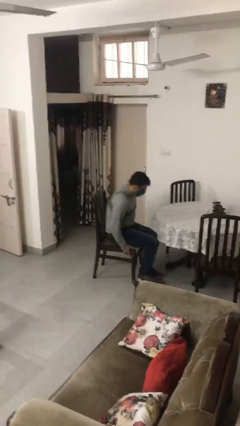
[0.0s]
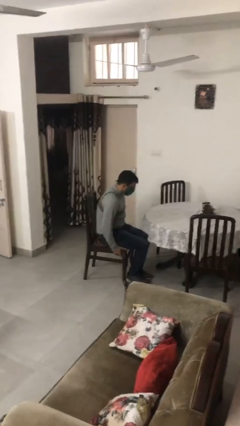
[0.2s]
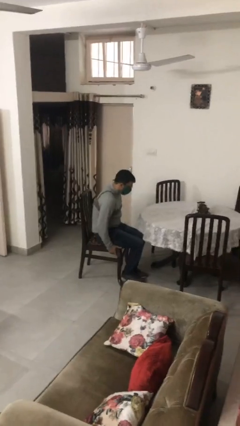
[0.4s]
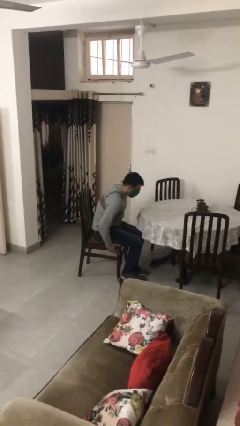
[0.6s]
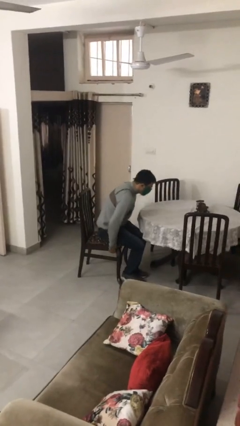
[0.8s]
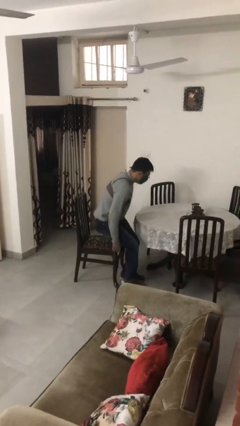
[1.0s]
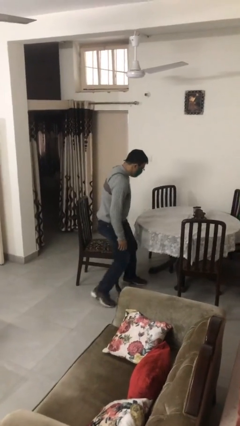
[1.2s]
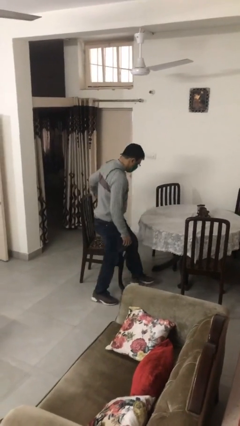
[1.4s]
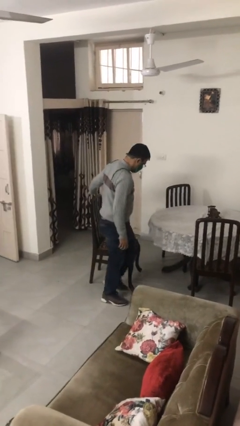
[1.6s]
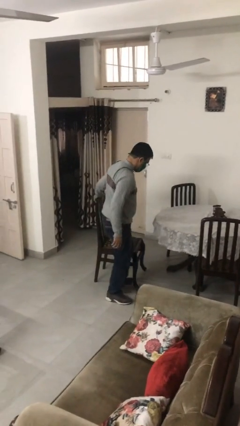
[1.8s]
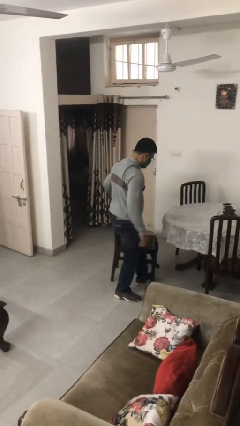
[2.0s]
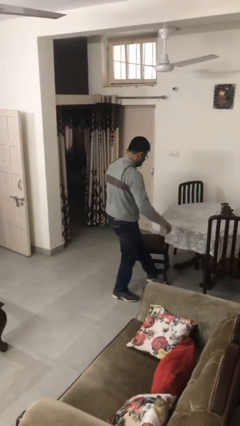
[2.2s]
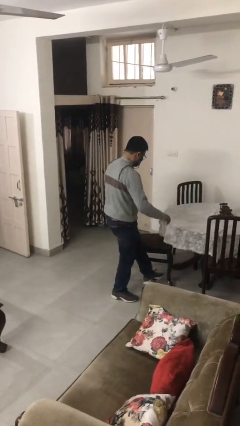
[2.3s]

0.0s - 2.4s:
person stands up

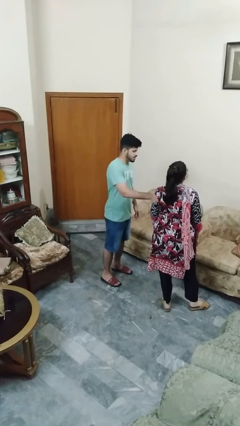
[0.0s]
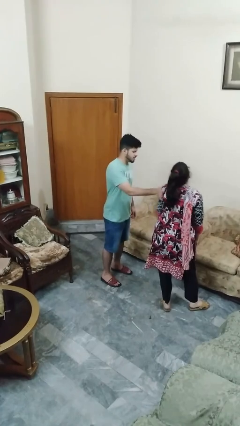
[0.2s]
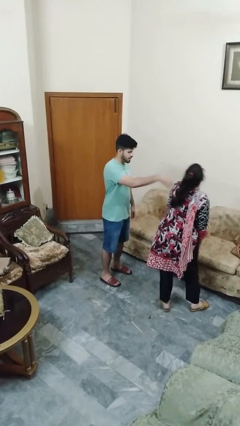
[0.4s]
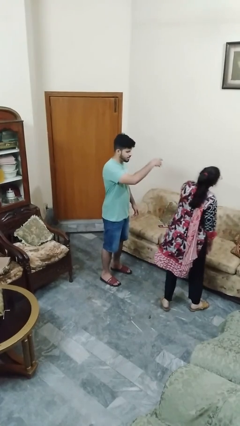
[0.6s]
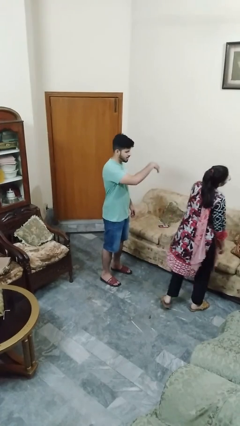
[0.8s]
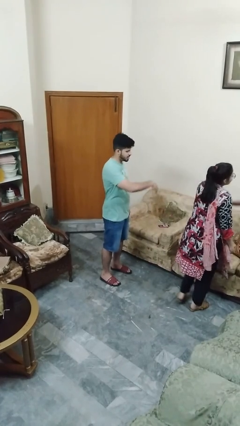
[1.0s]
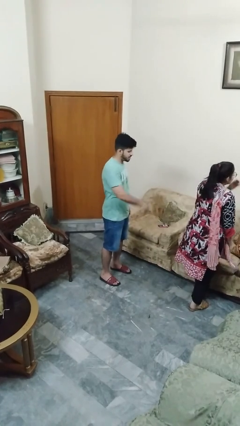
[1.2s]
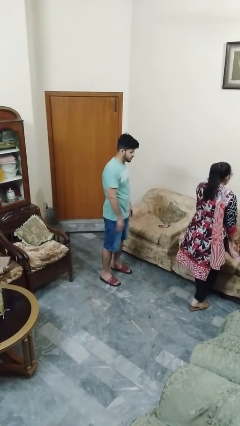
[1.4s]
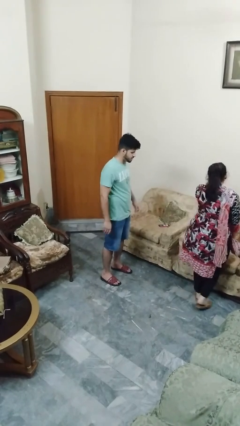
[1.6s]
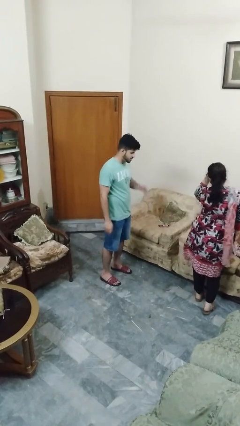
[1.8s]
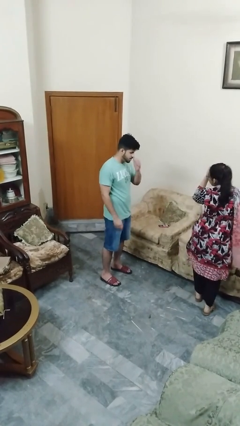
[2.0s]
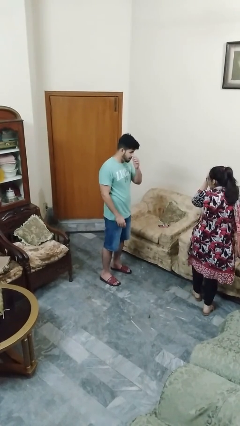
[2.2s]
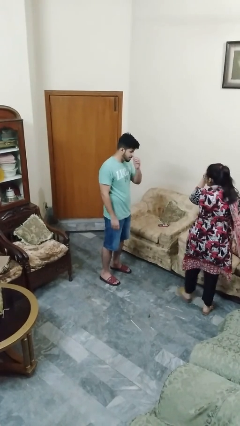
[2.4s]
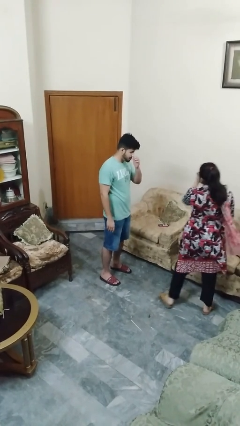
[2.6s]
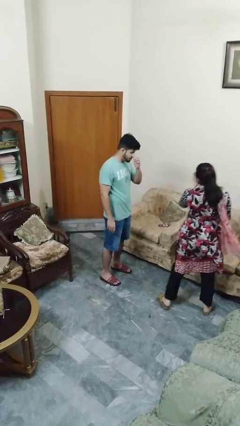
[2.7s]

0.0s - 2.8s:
person shoves person

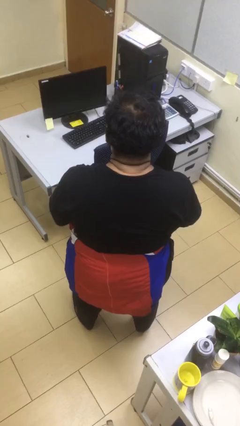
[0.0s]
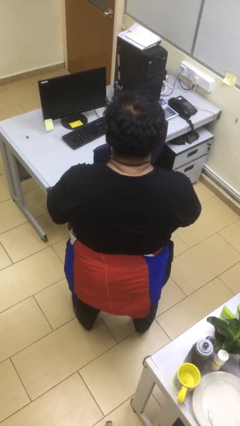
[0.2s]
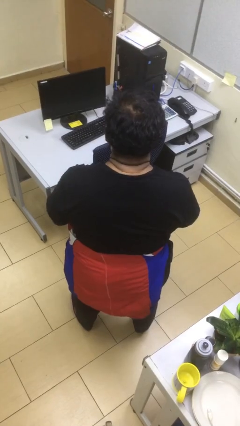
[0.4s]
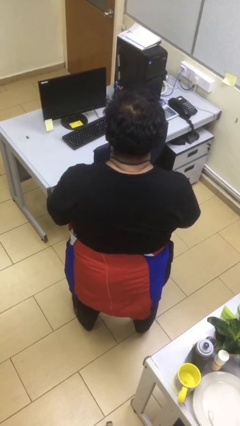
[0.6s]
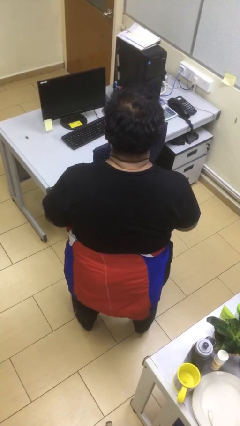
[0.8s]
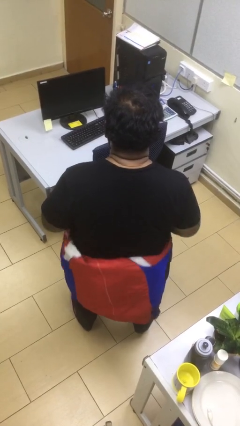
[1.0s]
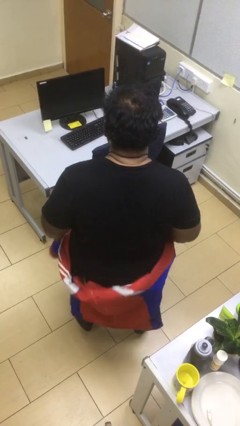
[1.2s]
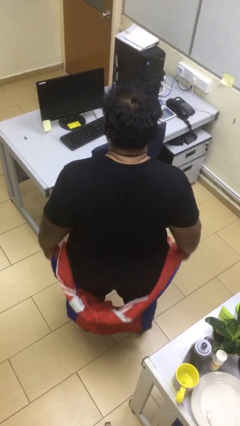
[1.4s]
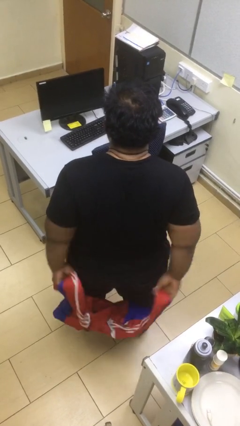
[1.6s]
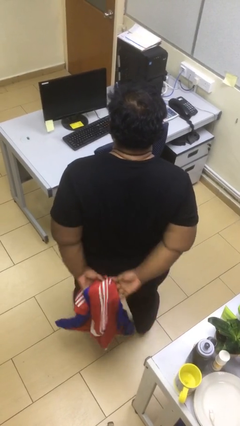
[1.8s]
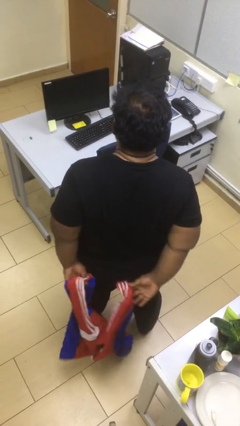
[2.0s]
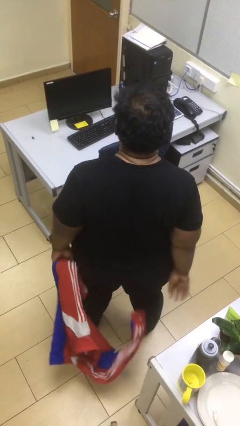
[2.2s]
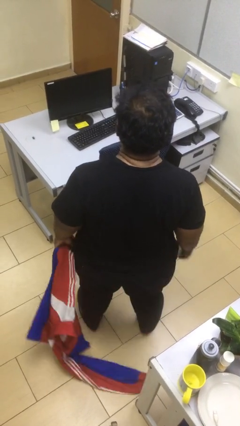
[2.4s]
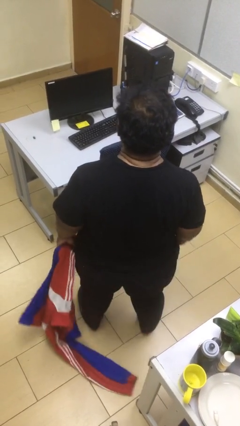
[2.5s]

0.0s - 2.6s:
person unties jacket around waist

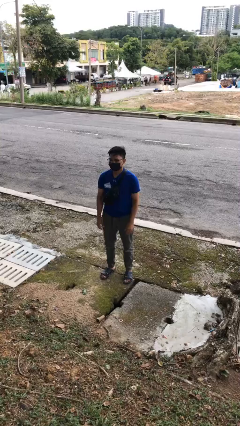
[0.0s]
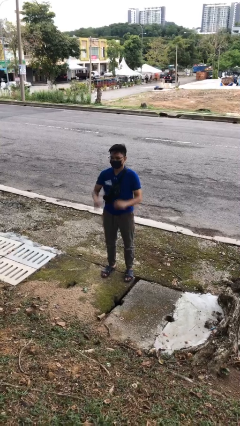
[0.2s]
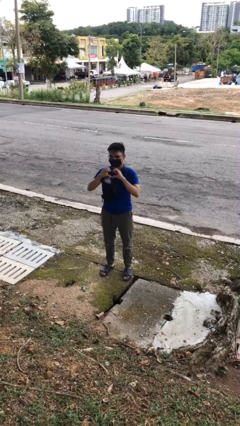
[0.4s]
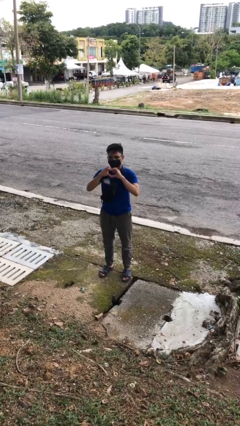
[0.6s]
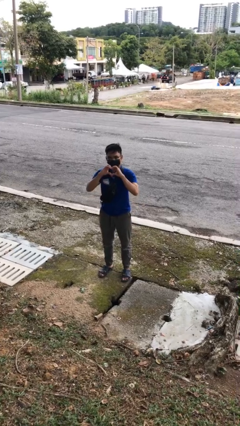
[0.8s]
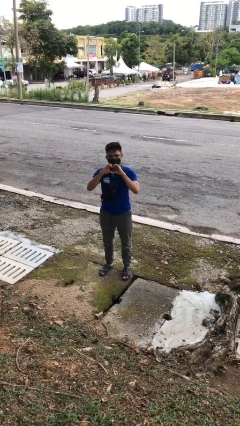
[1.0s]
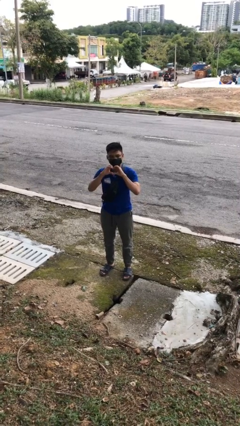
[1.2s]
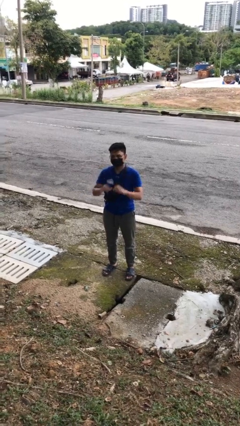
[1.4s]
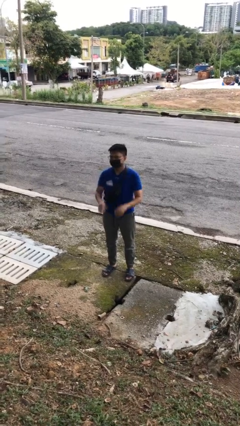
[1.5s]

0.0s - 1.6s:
person gestures heart

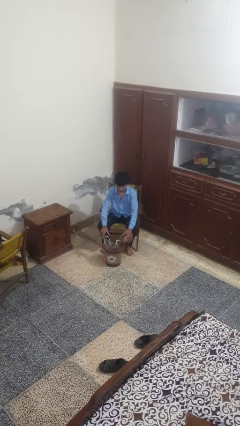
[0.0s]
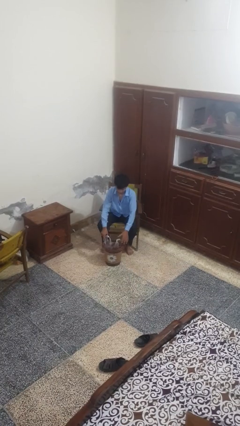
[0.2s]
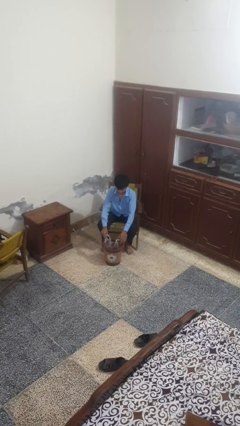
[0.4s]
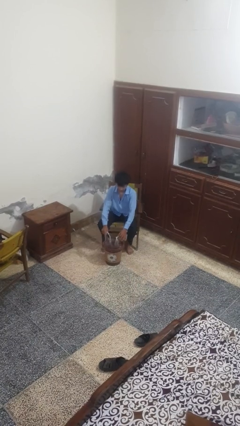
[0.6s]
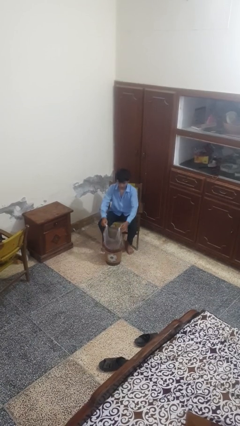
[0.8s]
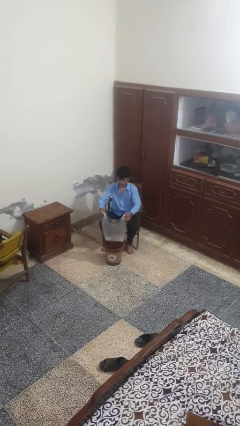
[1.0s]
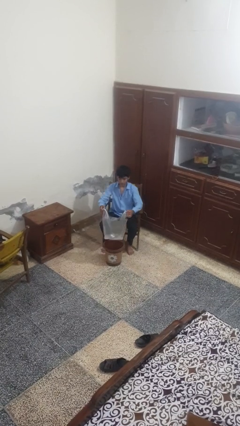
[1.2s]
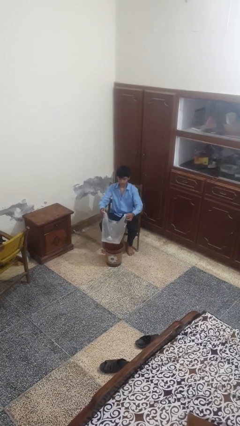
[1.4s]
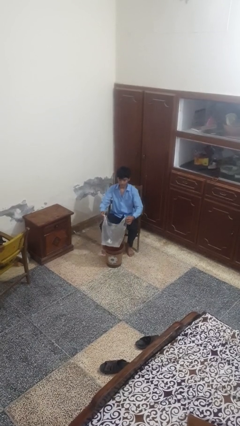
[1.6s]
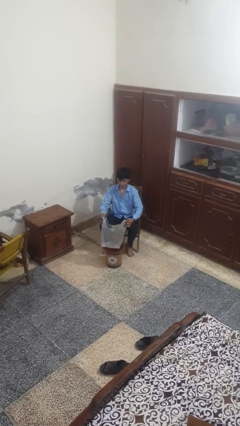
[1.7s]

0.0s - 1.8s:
person removes trashbag from trashcan

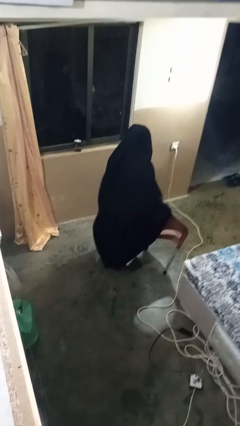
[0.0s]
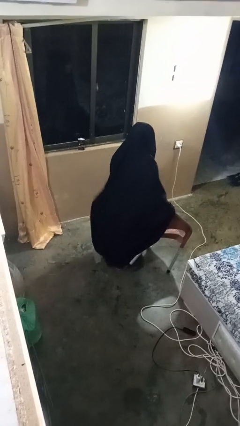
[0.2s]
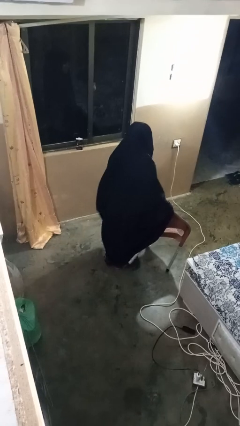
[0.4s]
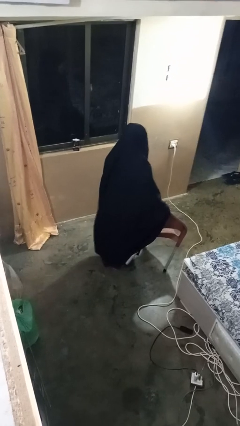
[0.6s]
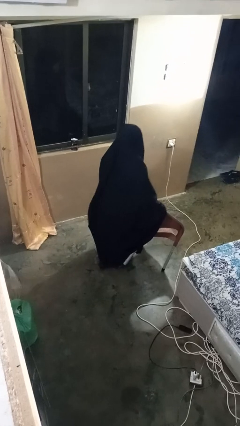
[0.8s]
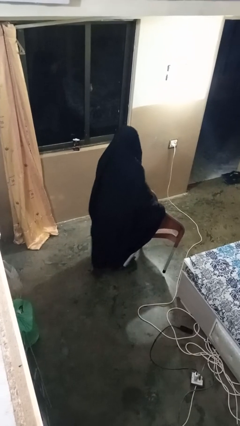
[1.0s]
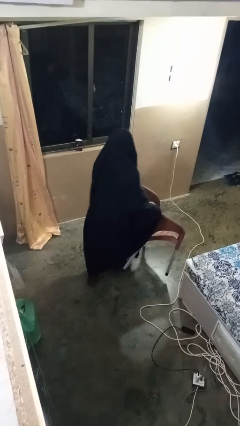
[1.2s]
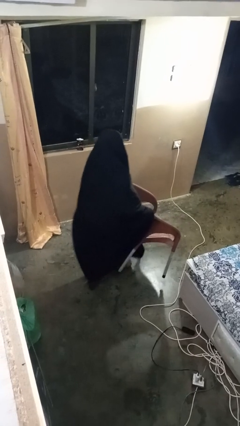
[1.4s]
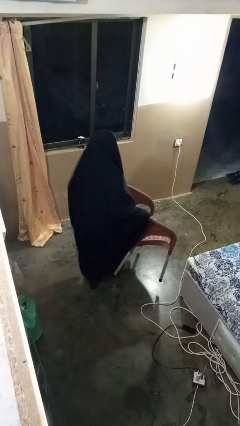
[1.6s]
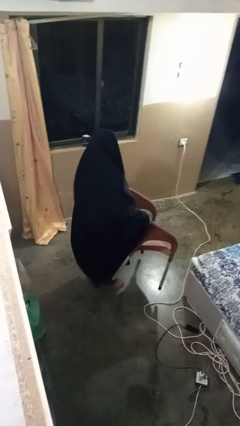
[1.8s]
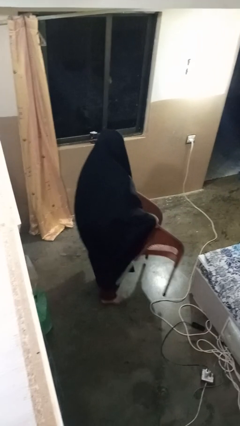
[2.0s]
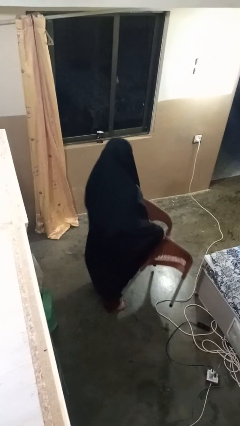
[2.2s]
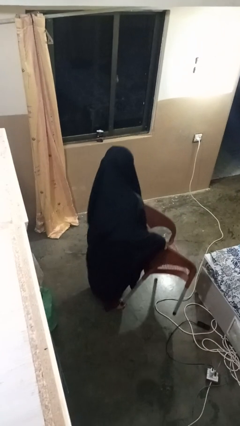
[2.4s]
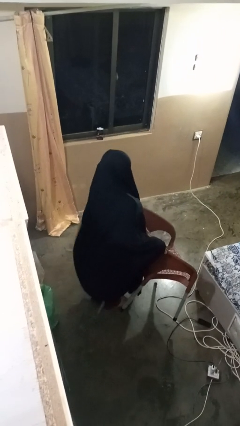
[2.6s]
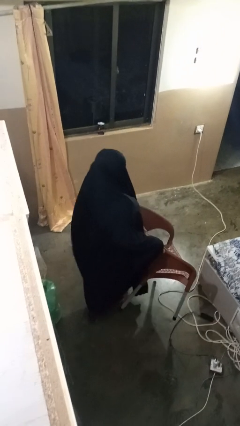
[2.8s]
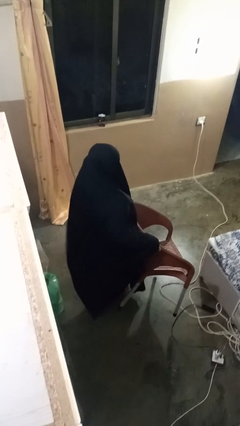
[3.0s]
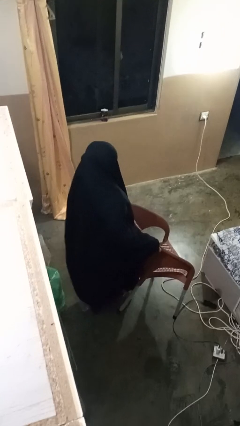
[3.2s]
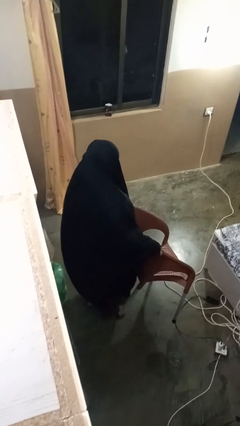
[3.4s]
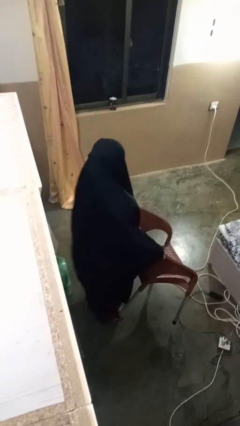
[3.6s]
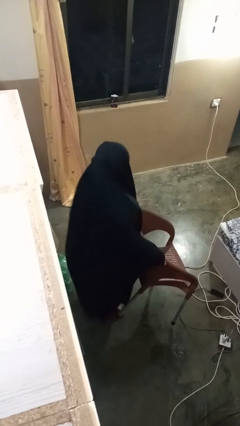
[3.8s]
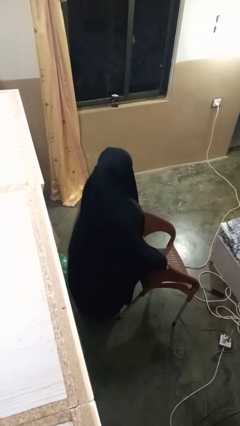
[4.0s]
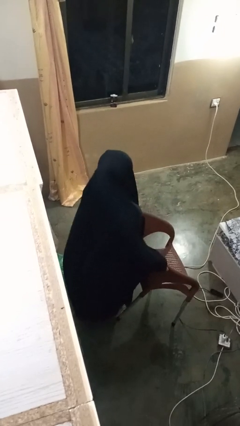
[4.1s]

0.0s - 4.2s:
person carries furniture

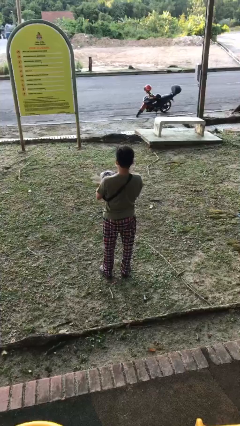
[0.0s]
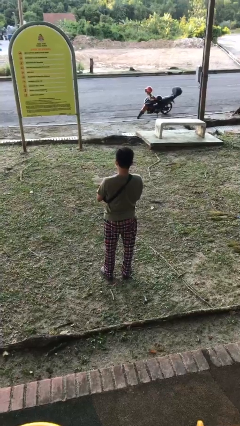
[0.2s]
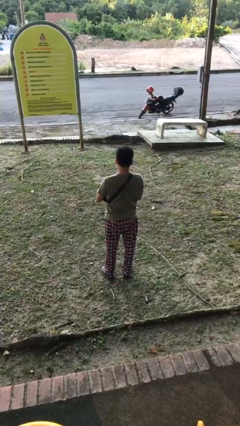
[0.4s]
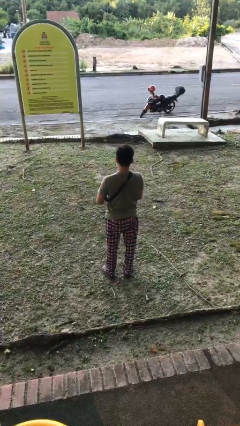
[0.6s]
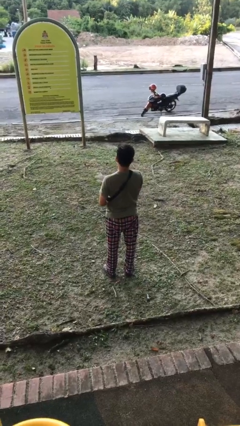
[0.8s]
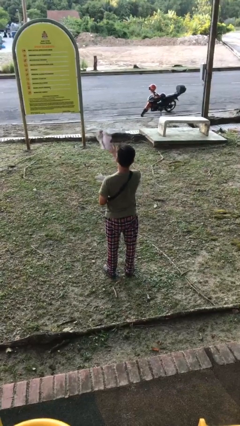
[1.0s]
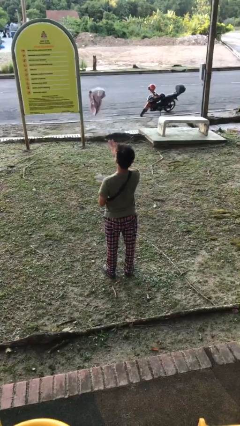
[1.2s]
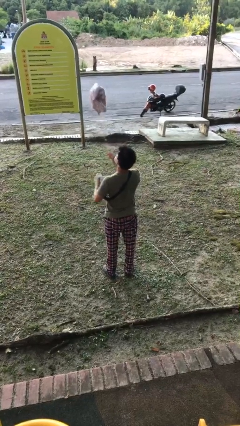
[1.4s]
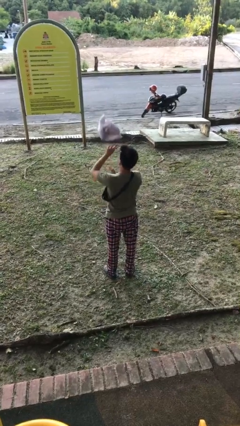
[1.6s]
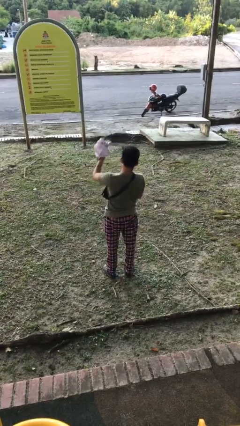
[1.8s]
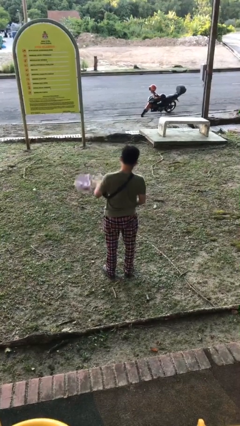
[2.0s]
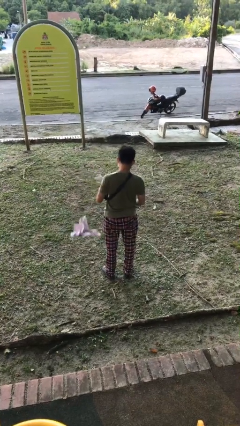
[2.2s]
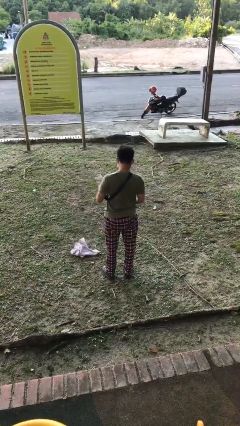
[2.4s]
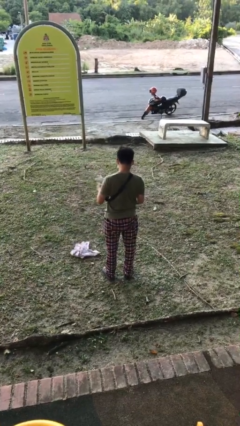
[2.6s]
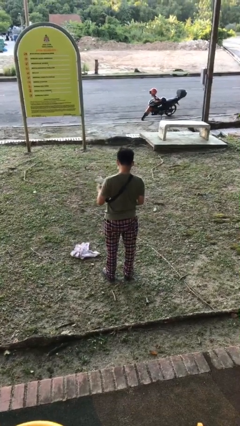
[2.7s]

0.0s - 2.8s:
person throws object into air
